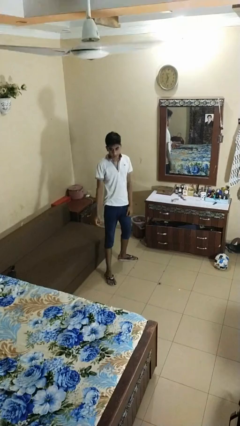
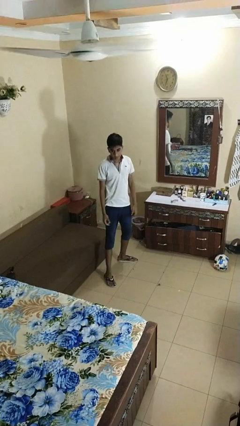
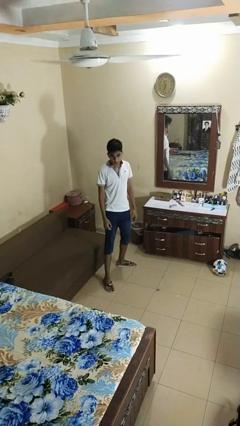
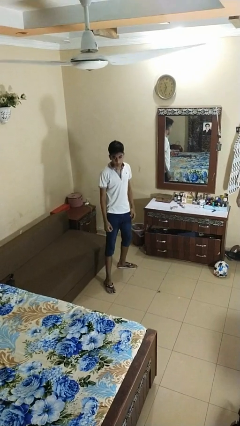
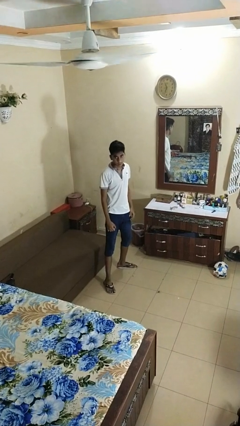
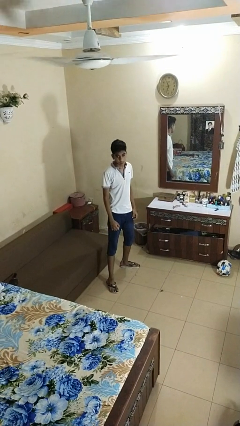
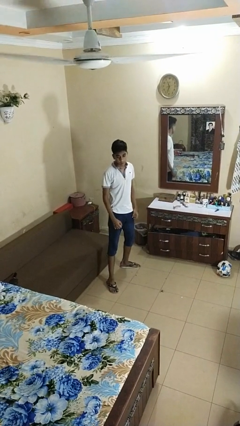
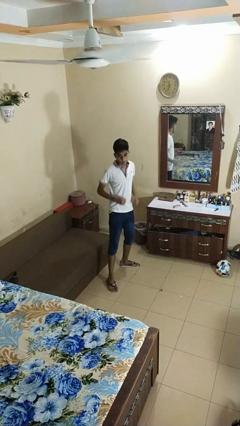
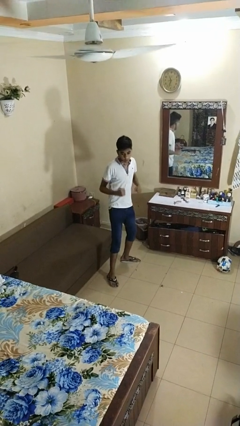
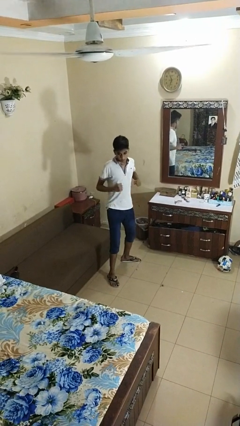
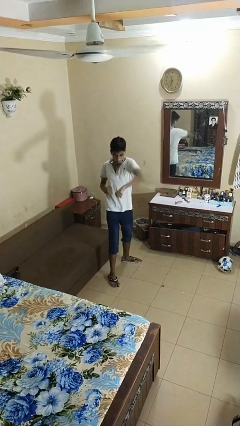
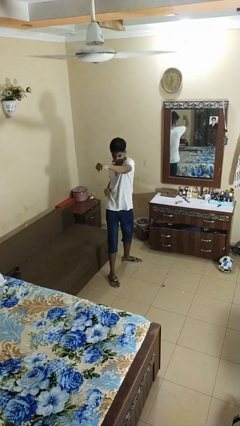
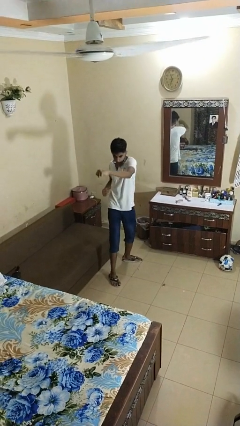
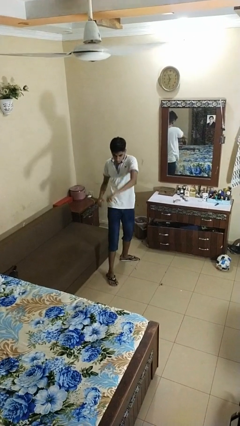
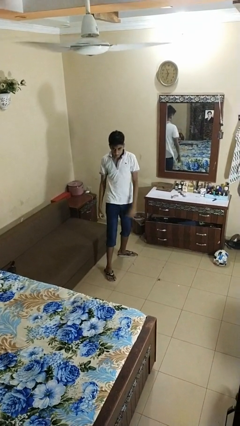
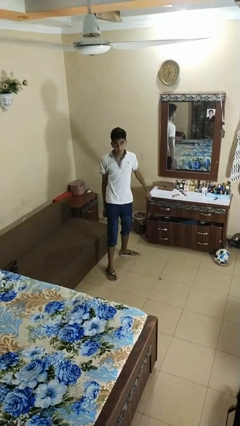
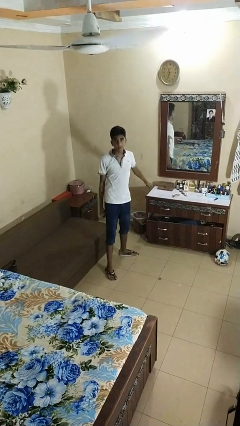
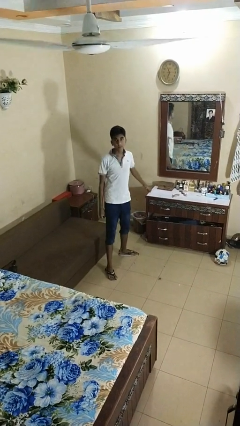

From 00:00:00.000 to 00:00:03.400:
person karate chop

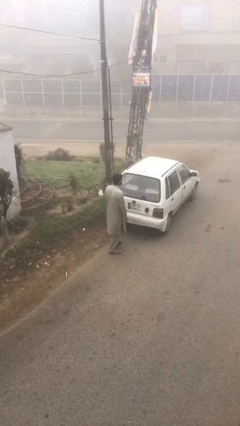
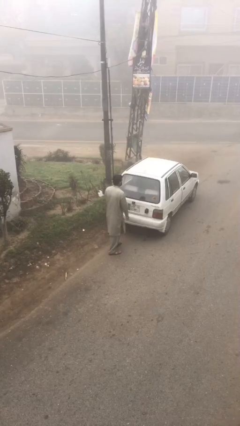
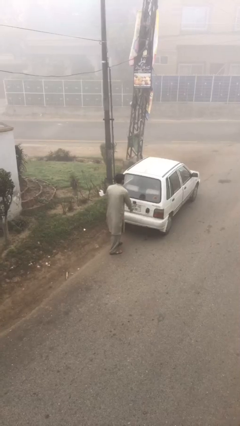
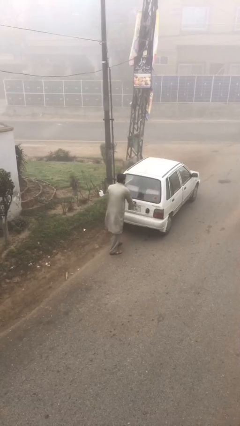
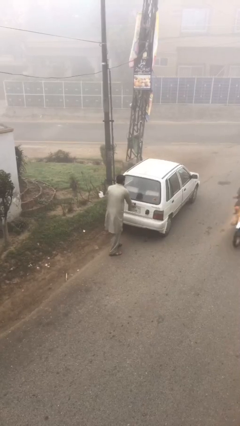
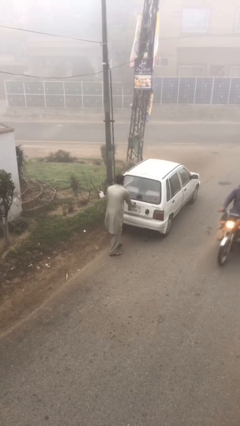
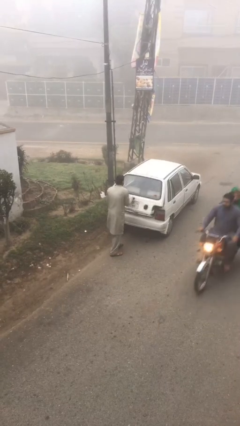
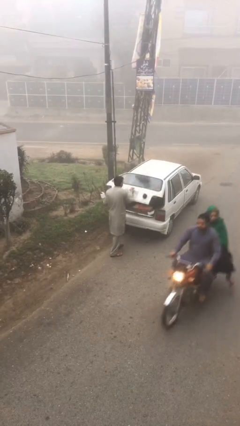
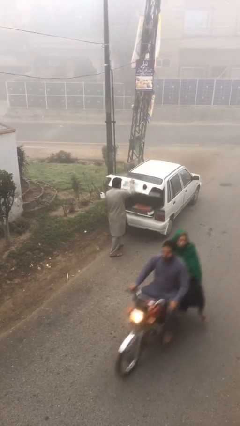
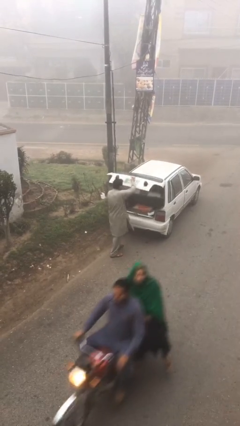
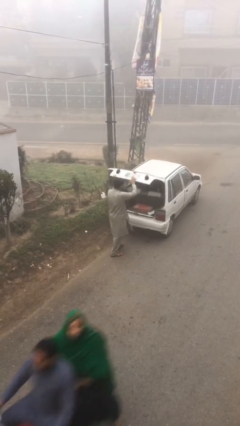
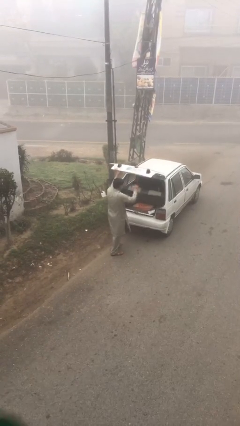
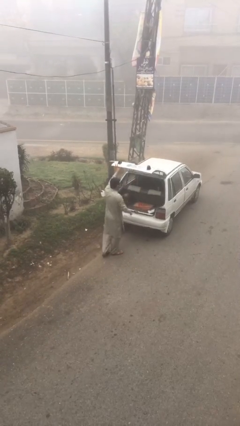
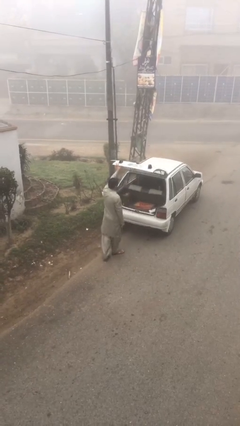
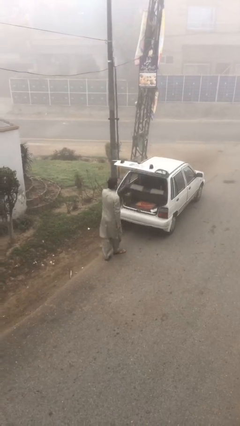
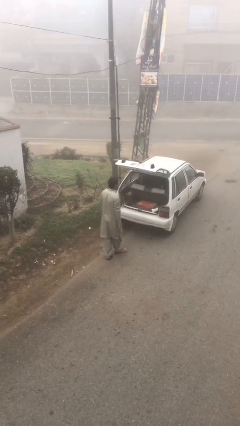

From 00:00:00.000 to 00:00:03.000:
person opens car trunk

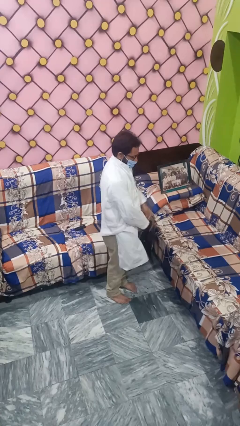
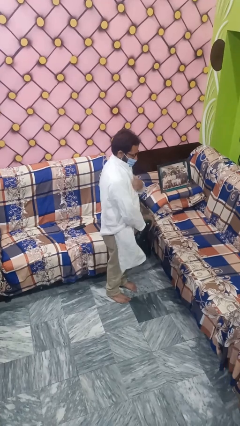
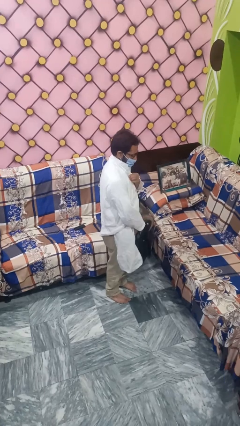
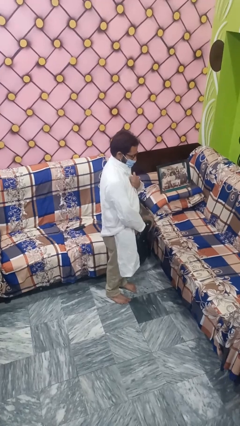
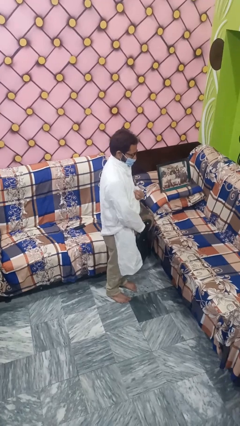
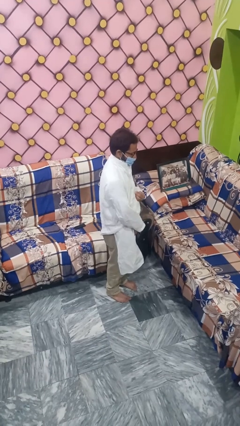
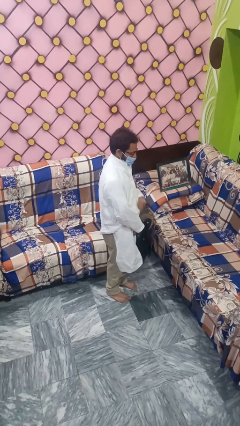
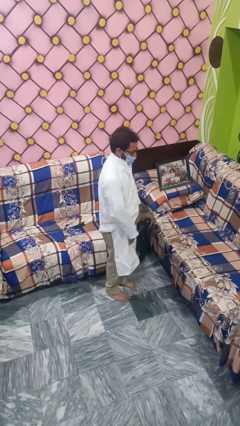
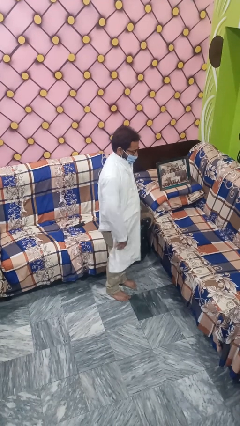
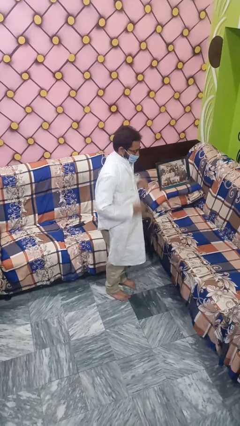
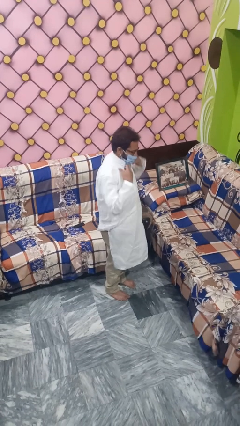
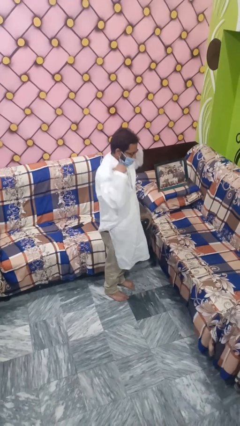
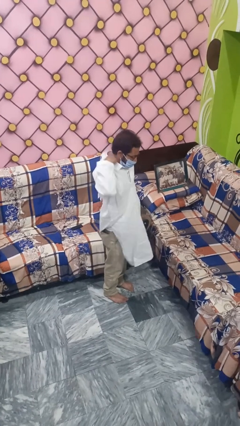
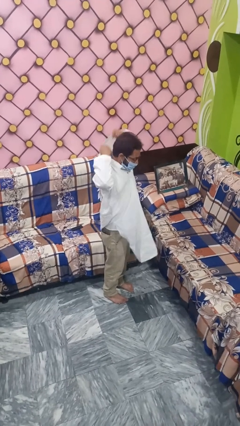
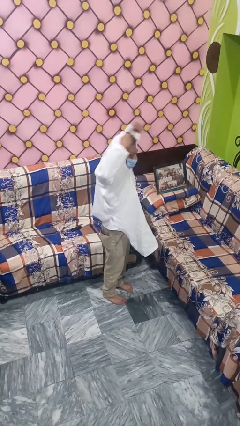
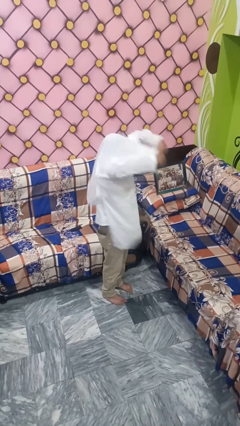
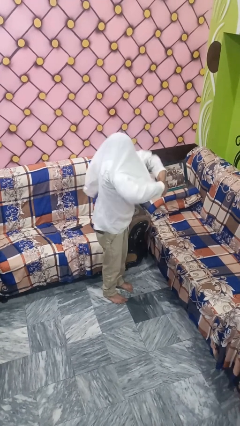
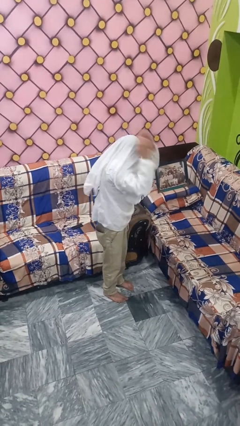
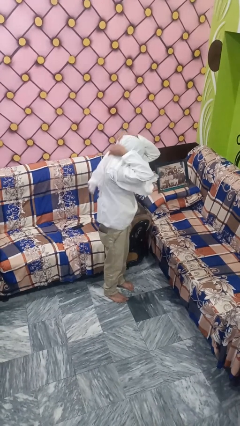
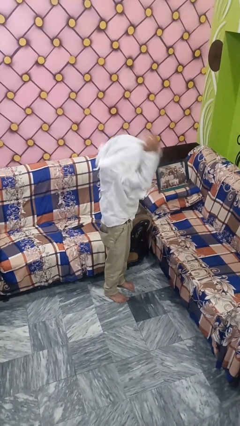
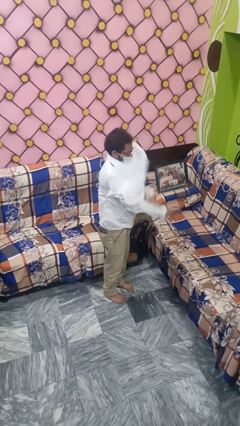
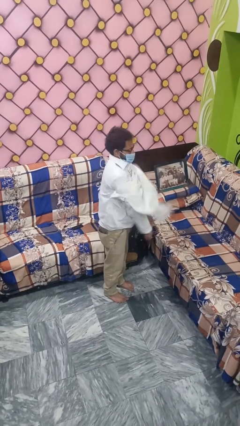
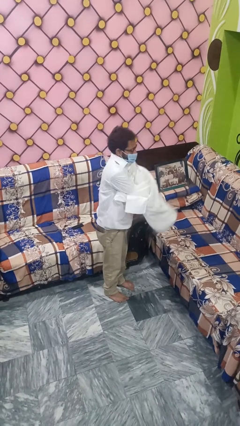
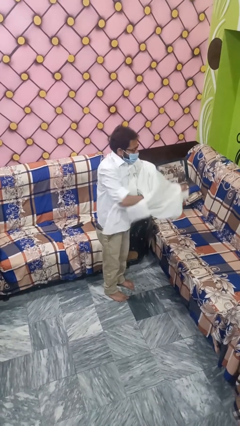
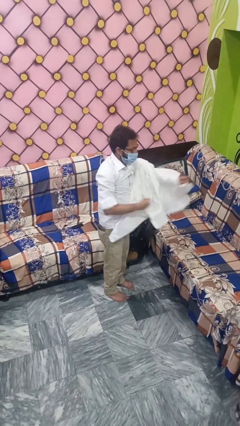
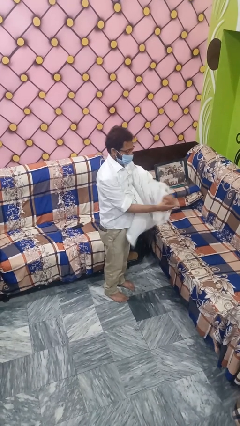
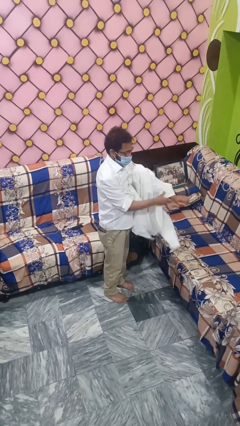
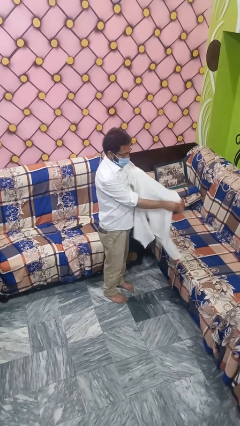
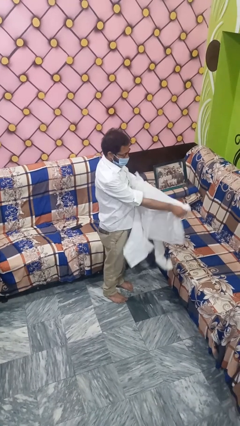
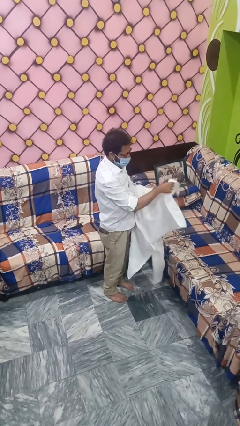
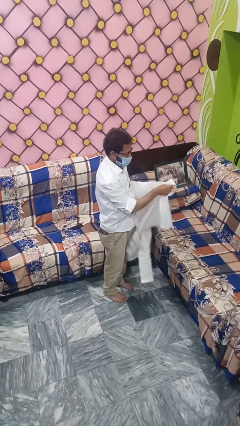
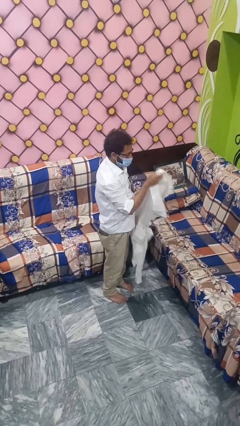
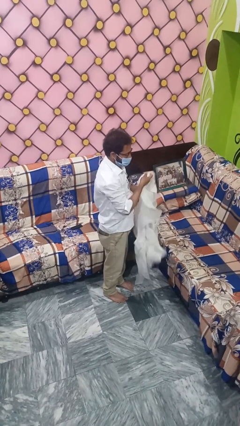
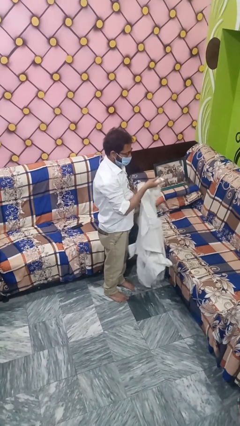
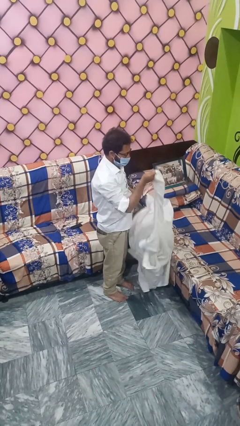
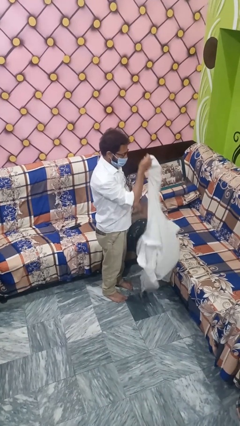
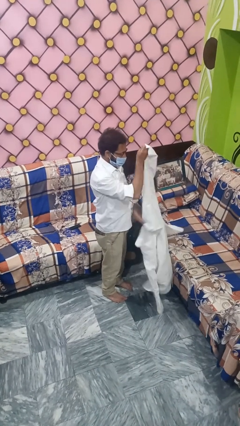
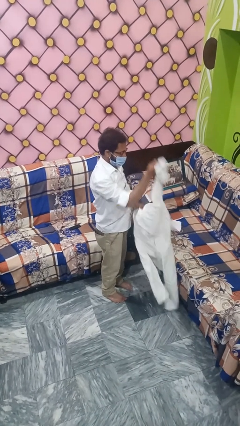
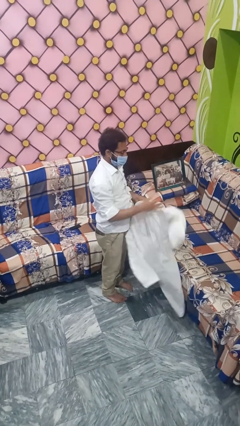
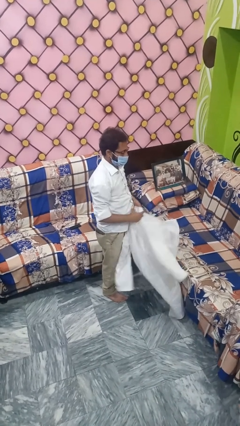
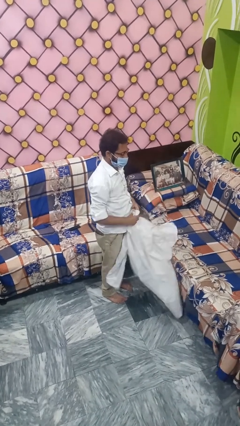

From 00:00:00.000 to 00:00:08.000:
person takes off shirt

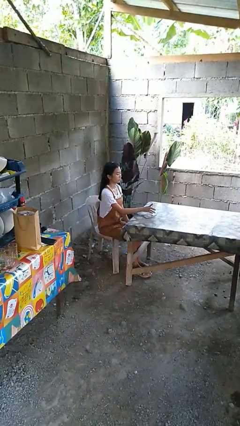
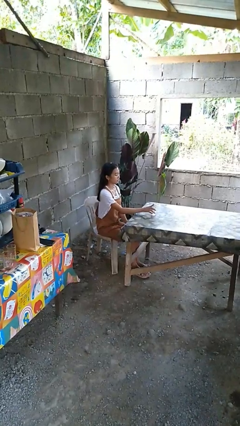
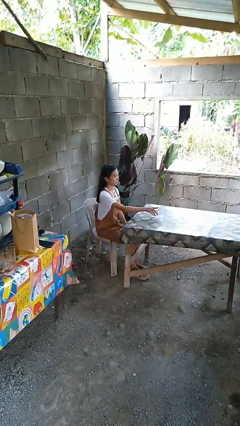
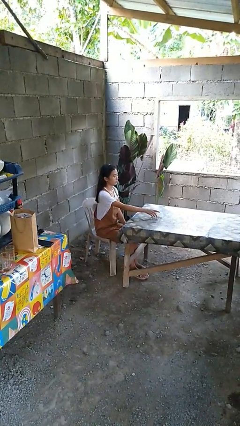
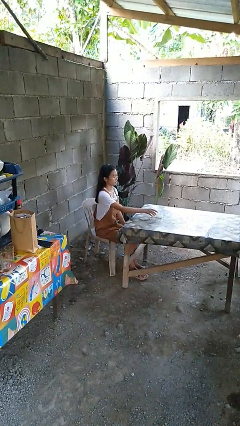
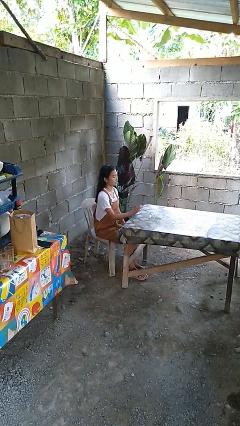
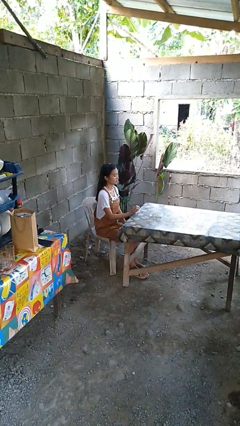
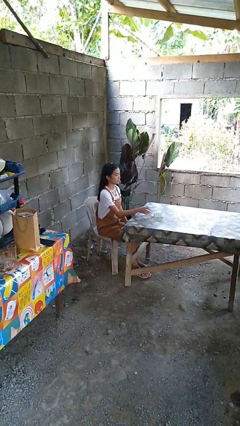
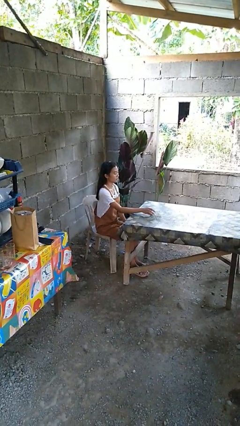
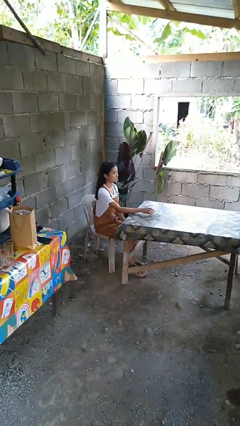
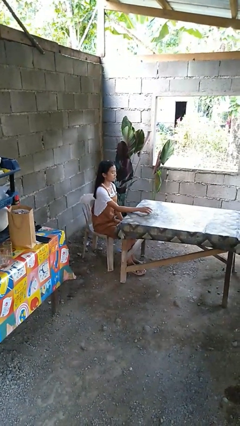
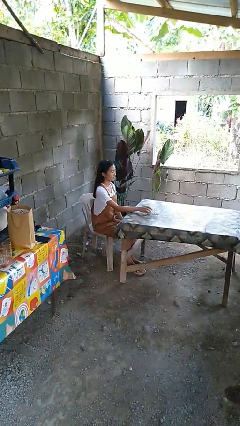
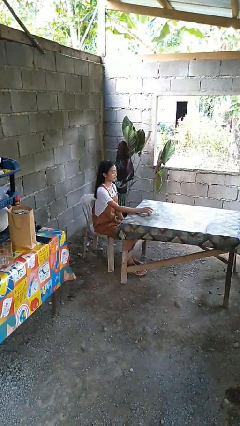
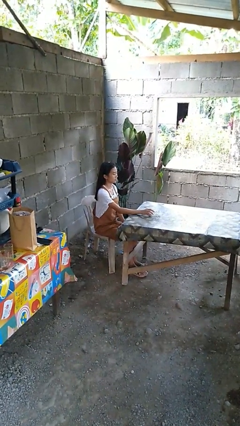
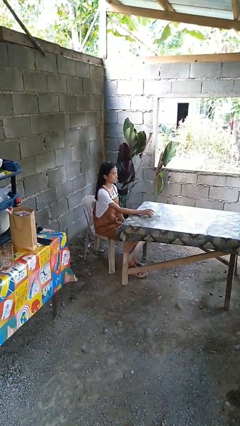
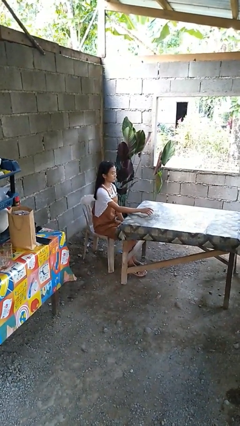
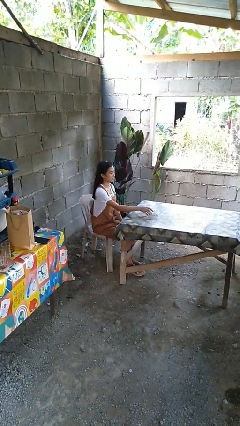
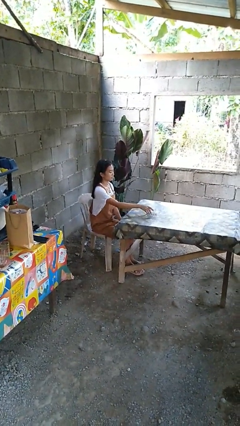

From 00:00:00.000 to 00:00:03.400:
person knocks over glass

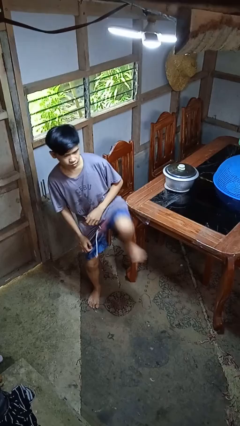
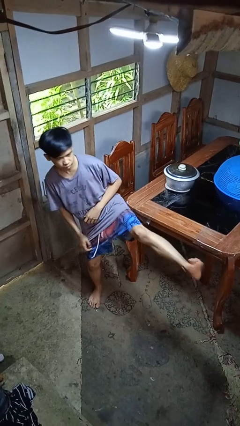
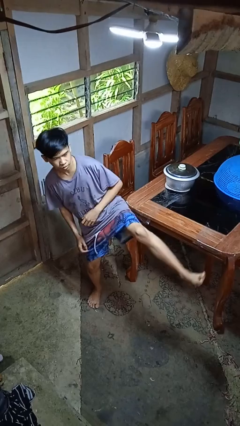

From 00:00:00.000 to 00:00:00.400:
person karate kicks
